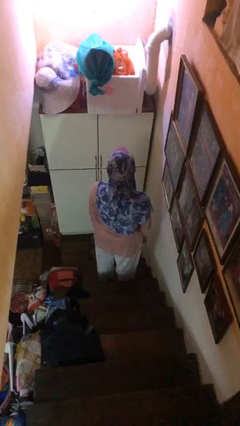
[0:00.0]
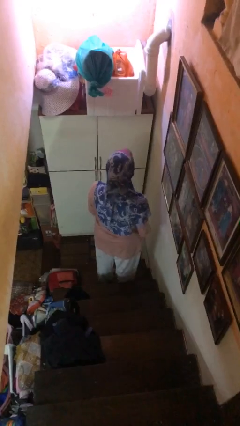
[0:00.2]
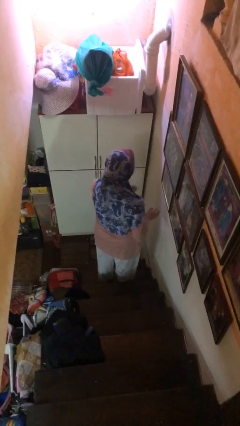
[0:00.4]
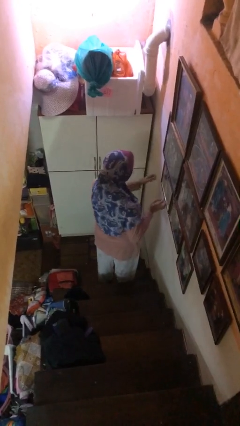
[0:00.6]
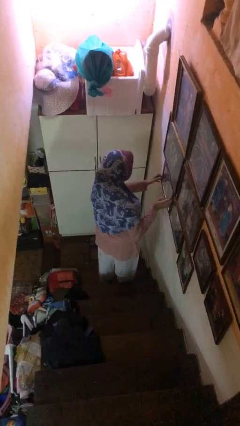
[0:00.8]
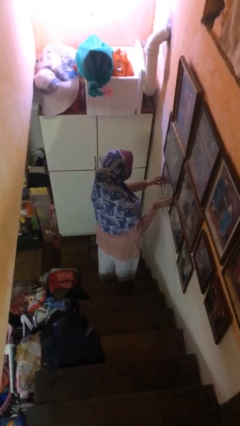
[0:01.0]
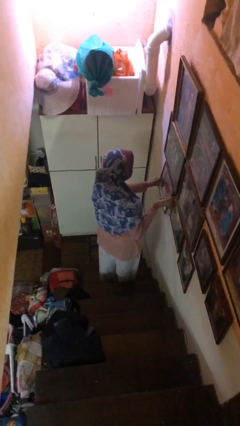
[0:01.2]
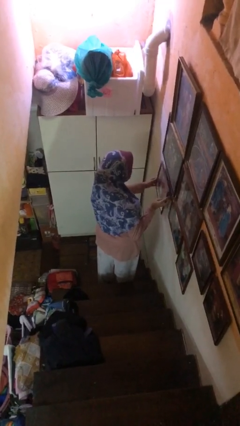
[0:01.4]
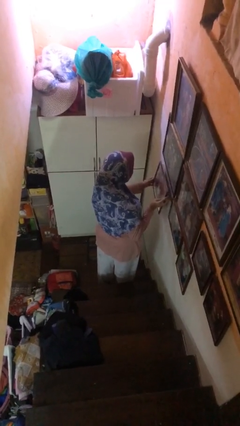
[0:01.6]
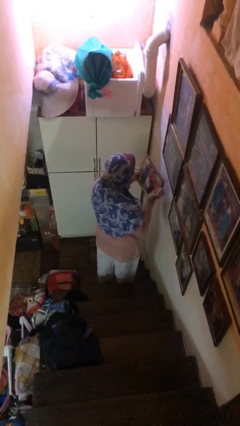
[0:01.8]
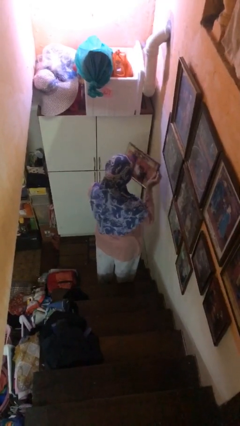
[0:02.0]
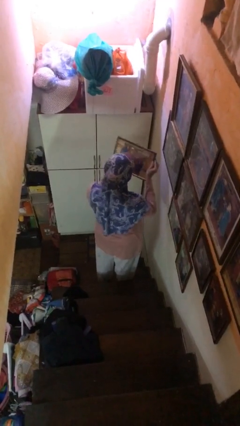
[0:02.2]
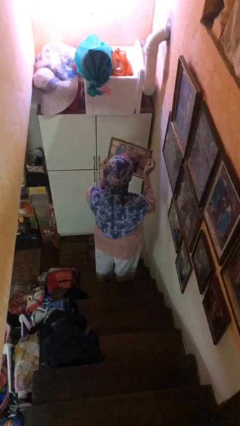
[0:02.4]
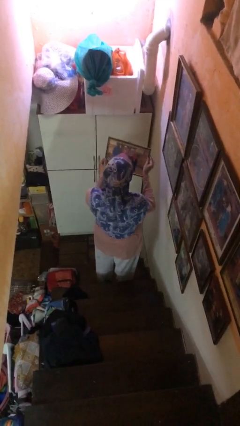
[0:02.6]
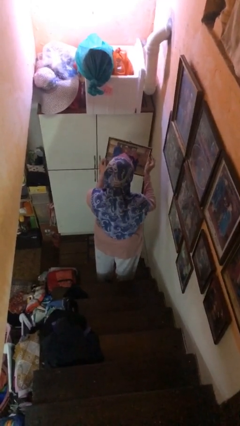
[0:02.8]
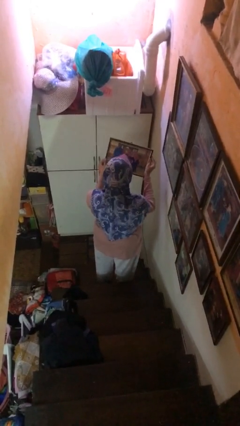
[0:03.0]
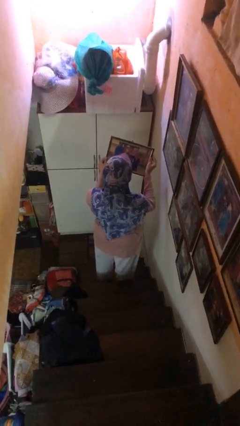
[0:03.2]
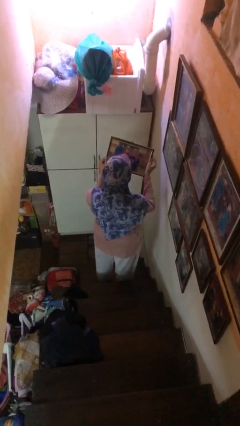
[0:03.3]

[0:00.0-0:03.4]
person puts up picture frame

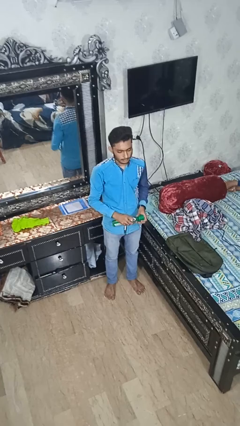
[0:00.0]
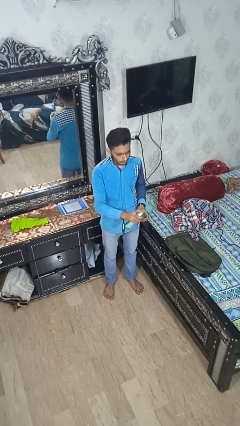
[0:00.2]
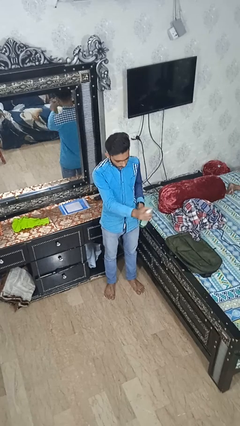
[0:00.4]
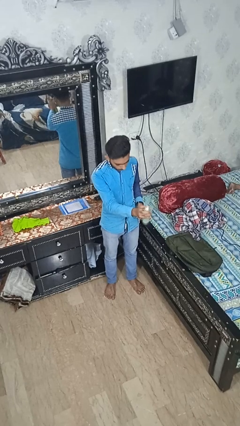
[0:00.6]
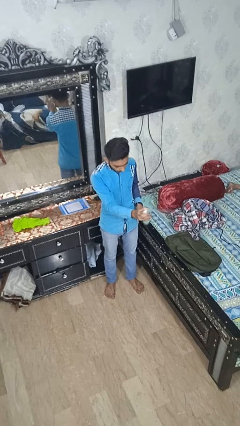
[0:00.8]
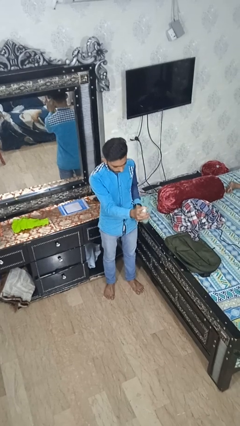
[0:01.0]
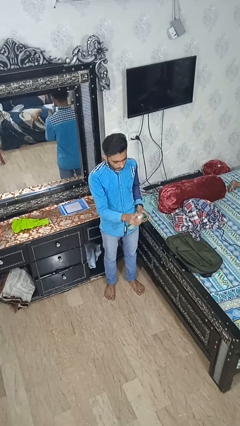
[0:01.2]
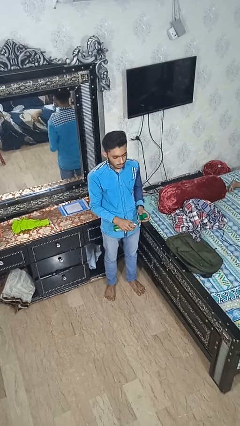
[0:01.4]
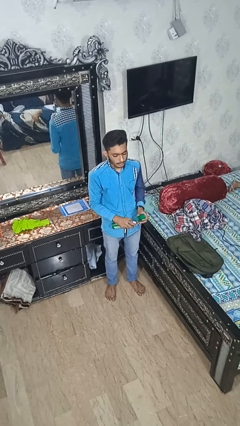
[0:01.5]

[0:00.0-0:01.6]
person sprays from bottle

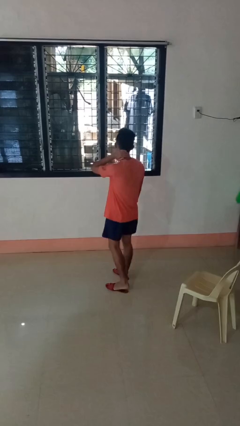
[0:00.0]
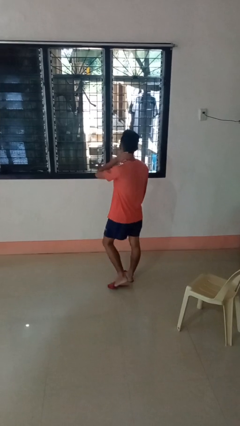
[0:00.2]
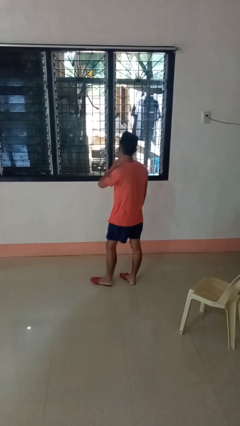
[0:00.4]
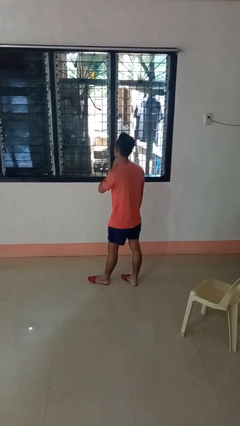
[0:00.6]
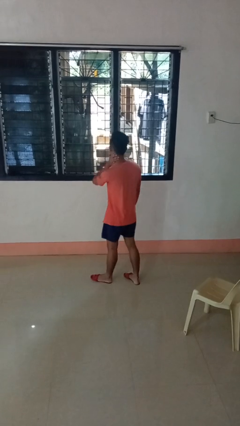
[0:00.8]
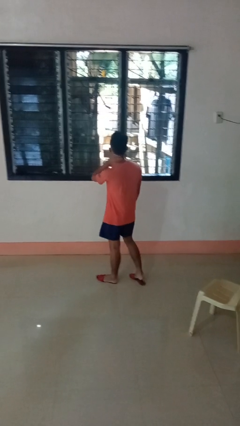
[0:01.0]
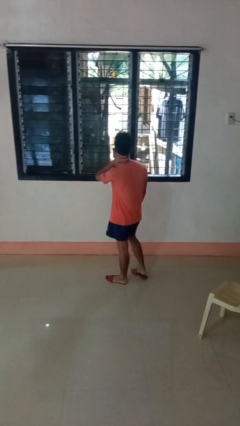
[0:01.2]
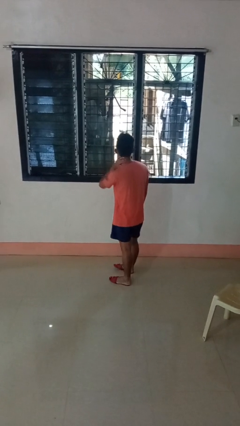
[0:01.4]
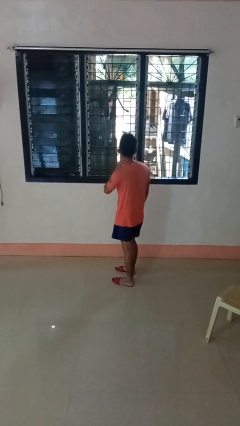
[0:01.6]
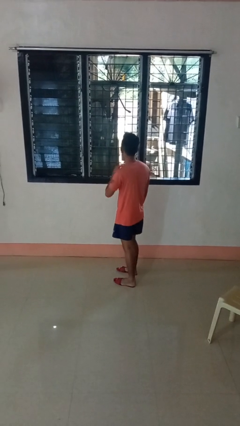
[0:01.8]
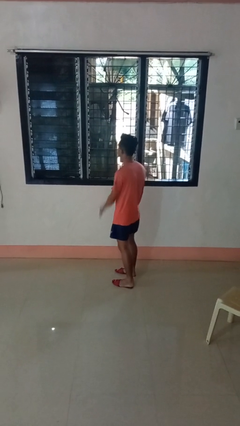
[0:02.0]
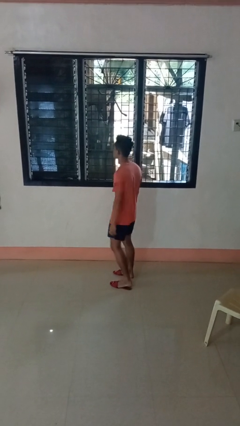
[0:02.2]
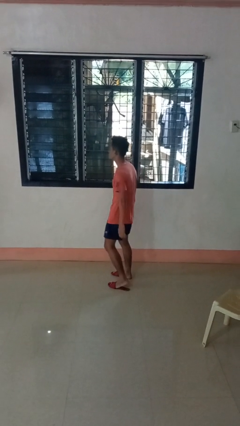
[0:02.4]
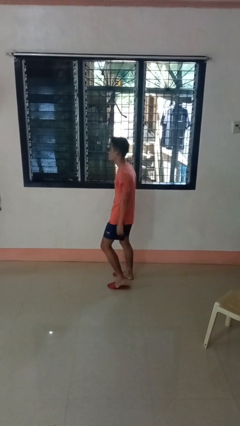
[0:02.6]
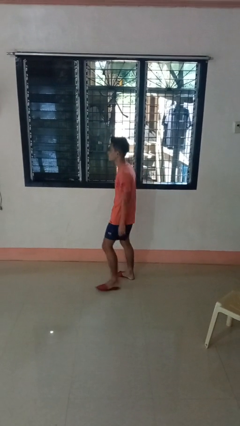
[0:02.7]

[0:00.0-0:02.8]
person rubs neck

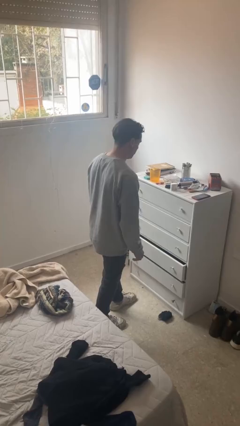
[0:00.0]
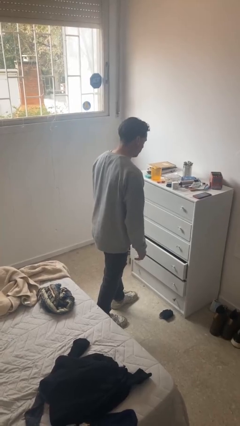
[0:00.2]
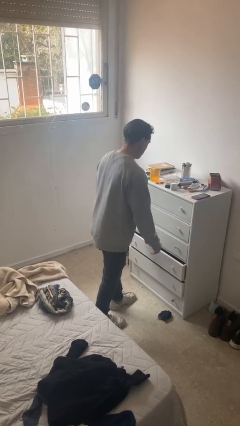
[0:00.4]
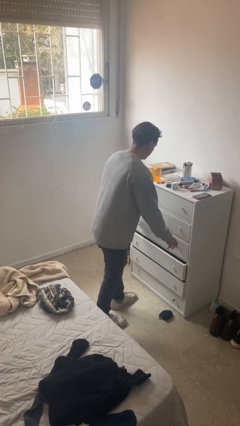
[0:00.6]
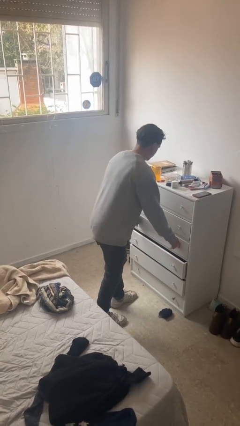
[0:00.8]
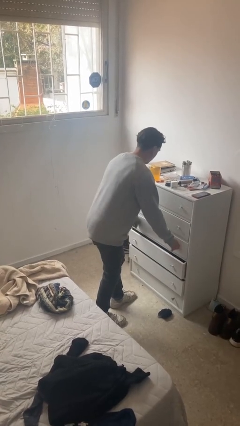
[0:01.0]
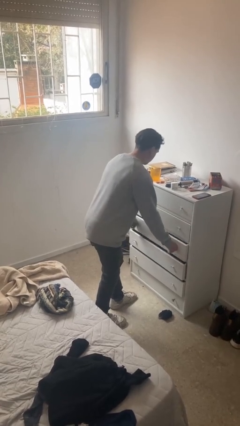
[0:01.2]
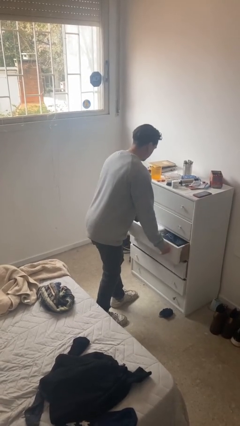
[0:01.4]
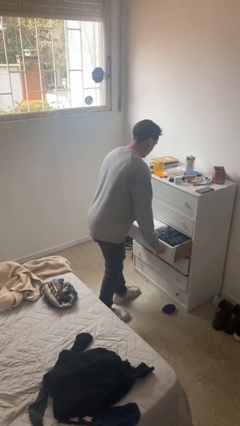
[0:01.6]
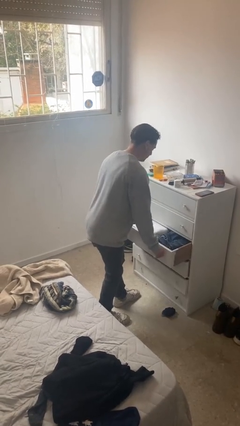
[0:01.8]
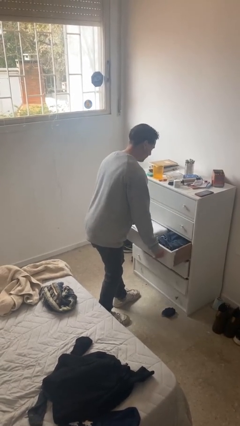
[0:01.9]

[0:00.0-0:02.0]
person opens dresser drawer

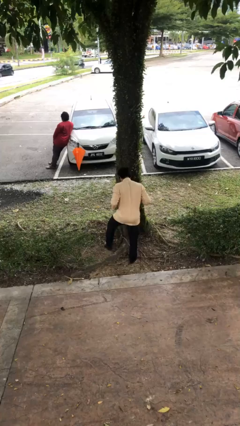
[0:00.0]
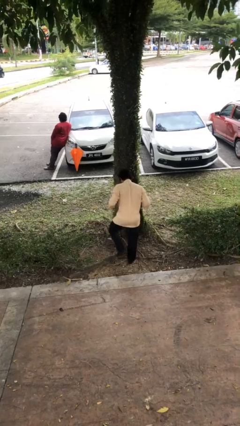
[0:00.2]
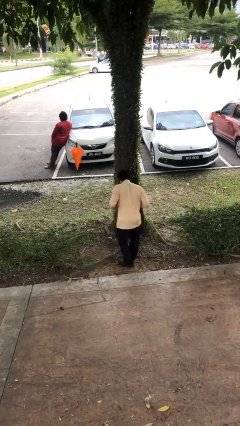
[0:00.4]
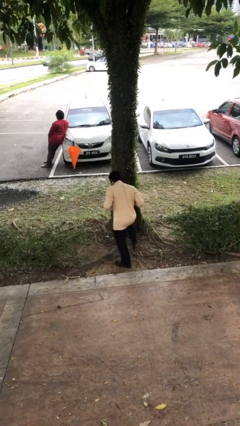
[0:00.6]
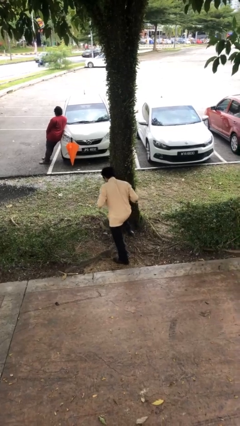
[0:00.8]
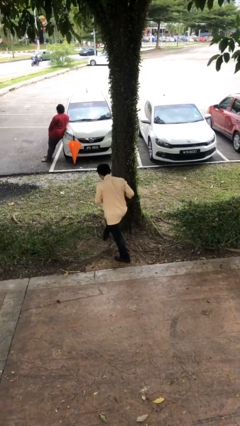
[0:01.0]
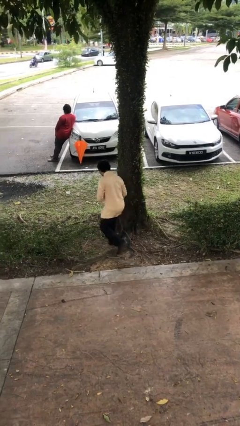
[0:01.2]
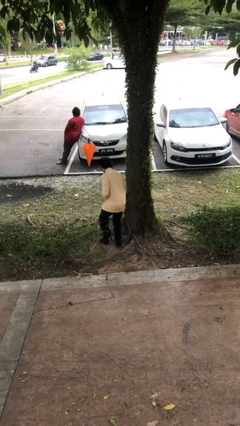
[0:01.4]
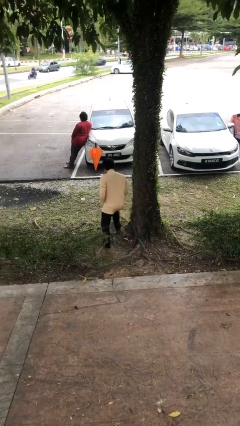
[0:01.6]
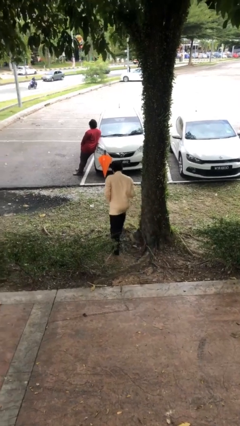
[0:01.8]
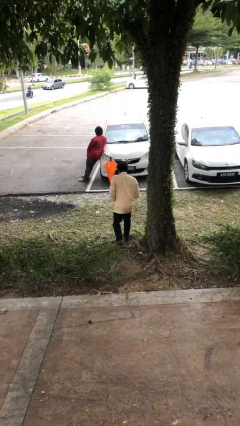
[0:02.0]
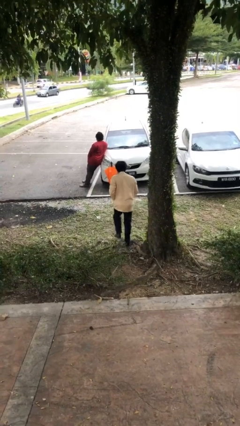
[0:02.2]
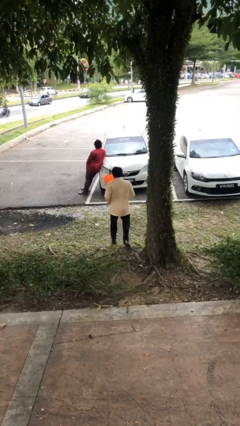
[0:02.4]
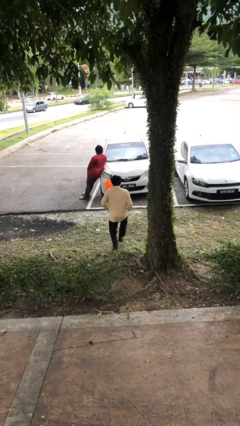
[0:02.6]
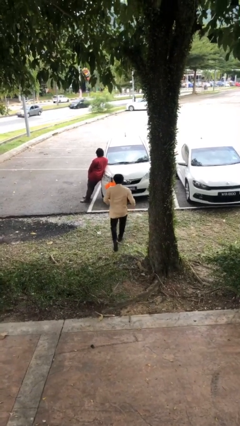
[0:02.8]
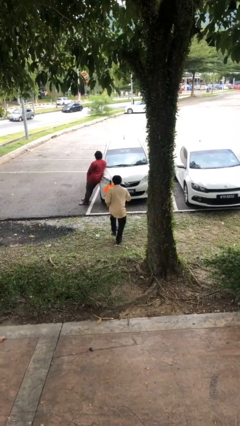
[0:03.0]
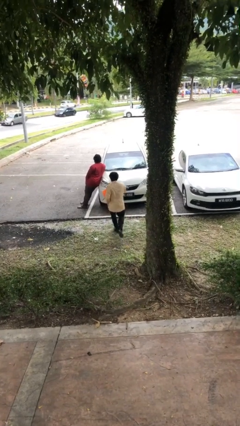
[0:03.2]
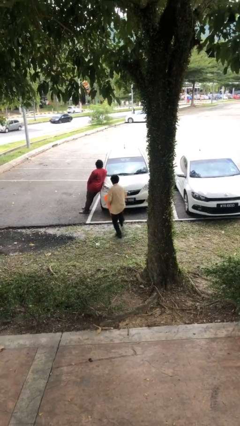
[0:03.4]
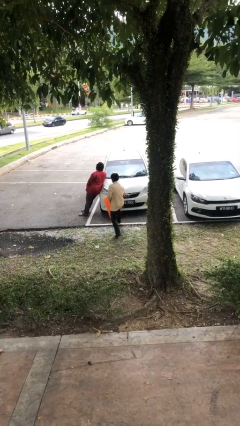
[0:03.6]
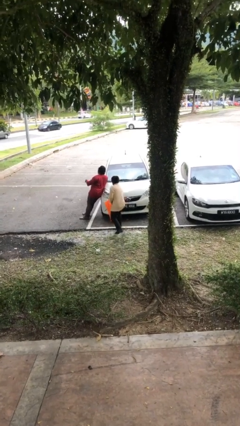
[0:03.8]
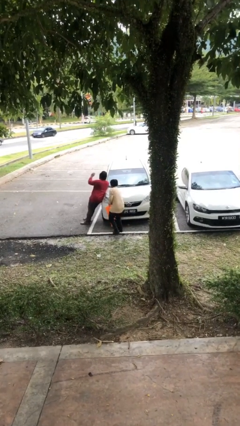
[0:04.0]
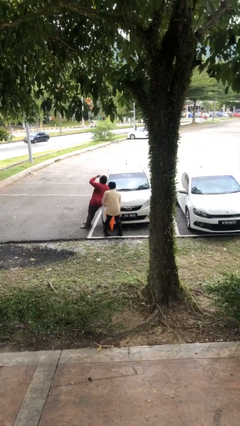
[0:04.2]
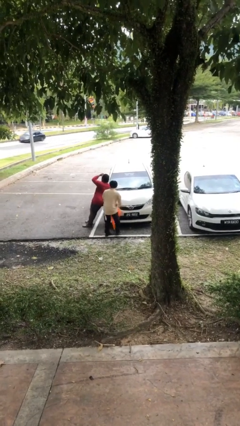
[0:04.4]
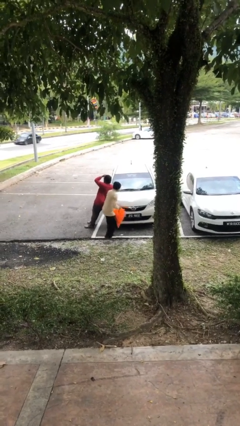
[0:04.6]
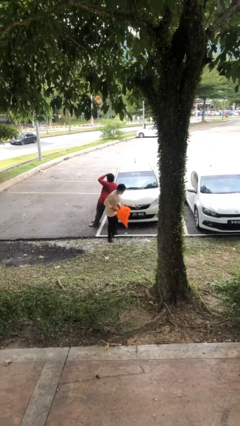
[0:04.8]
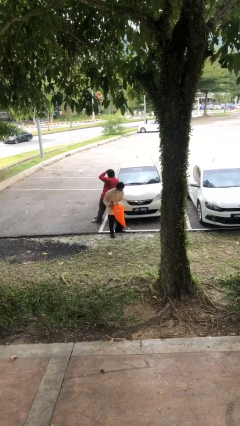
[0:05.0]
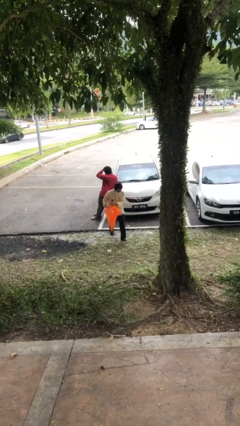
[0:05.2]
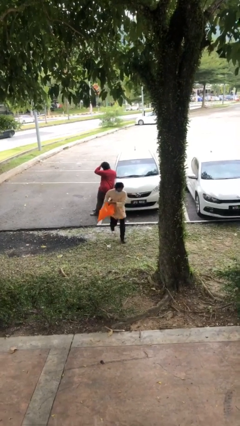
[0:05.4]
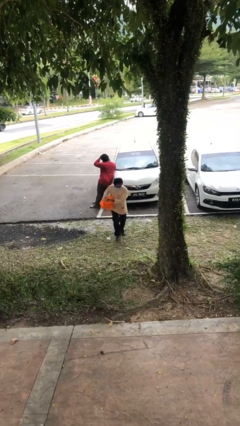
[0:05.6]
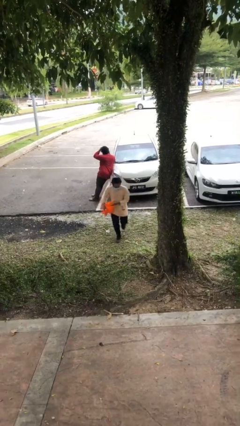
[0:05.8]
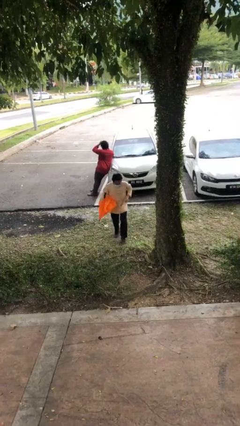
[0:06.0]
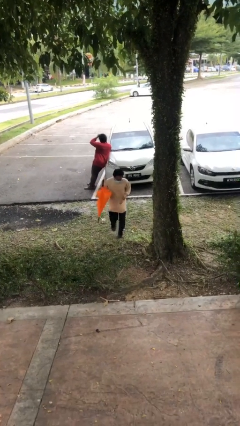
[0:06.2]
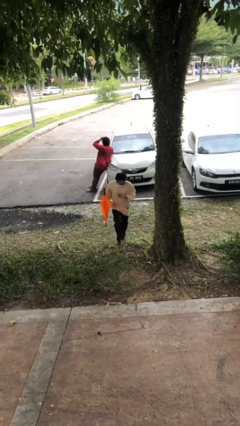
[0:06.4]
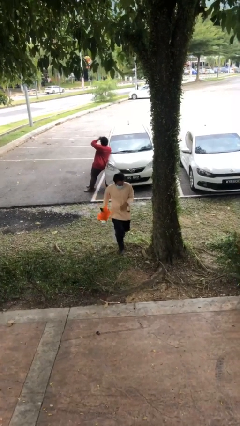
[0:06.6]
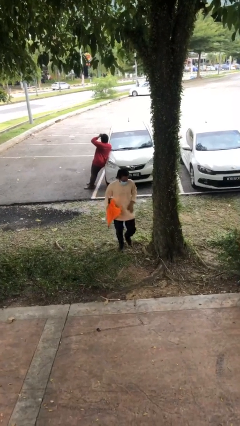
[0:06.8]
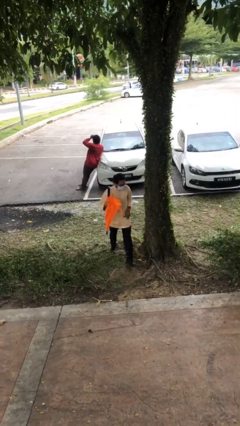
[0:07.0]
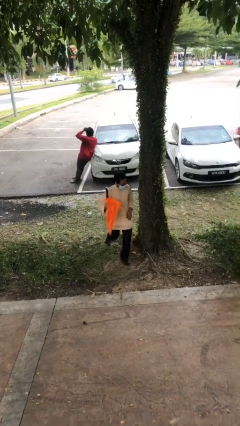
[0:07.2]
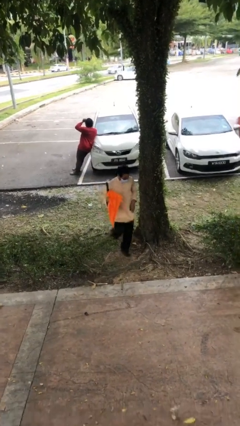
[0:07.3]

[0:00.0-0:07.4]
person steals object from person

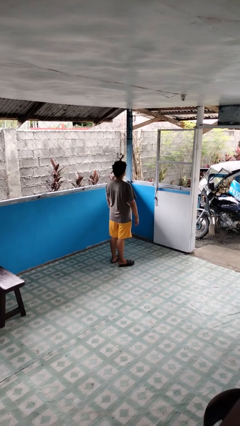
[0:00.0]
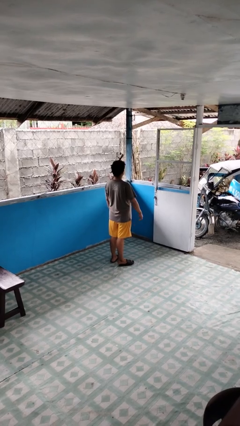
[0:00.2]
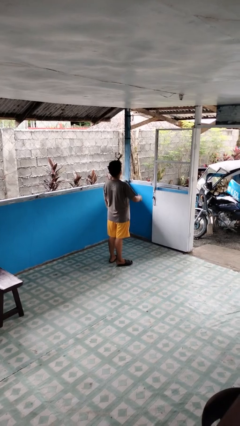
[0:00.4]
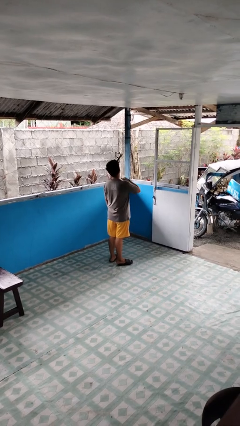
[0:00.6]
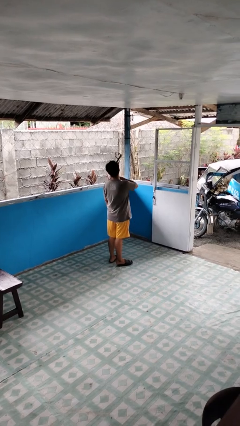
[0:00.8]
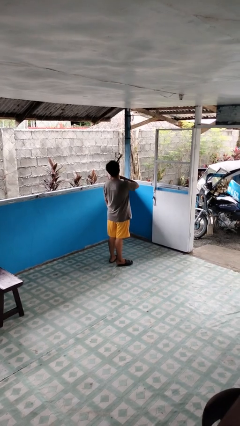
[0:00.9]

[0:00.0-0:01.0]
person gestures cut
